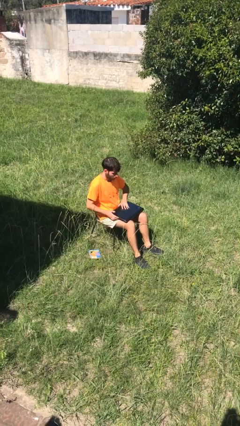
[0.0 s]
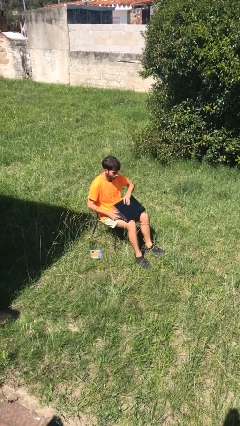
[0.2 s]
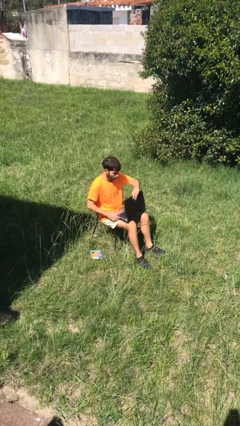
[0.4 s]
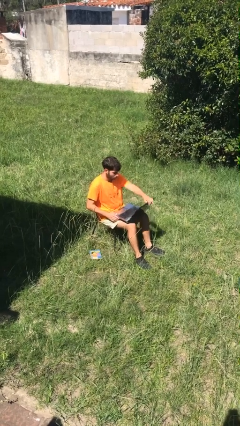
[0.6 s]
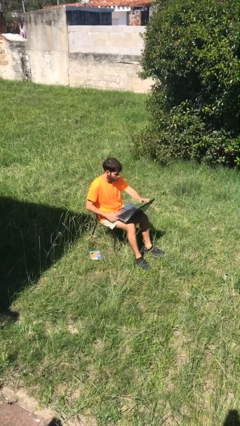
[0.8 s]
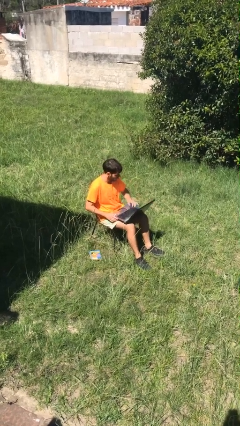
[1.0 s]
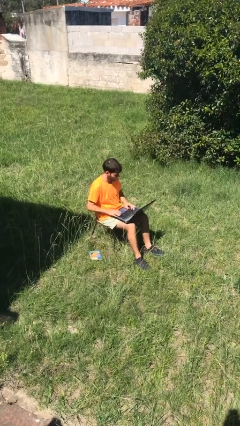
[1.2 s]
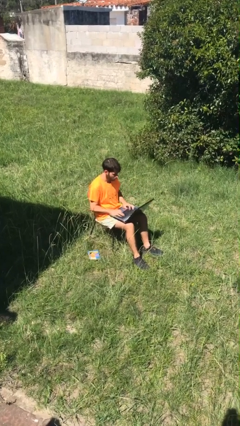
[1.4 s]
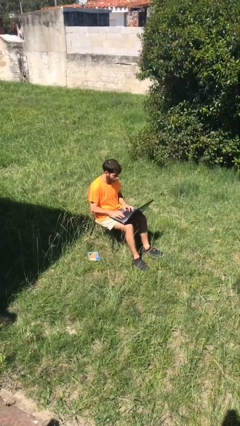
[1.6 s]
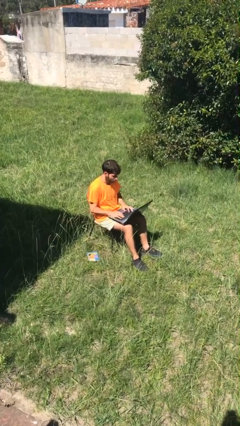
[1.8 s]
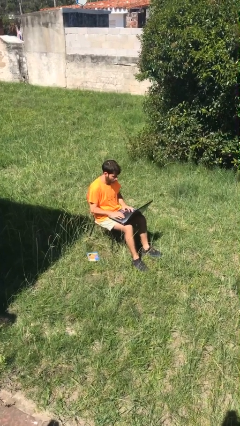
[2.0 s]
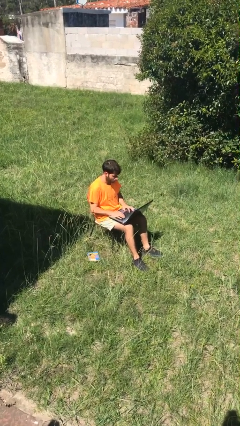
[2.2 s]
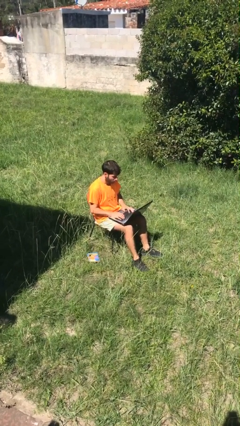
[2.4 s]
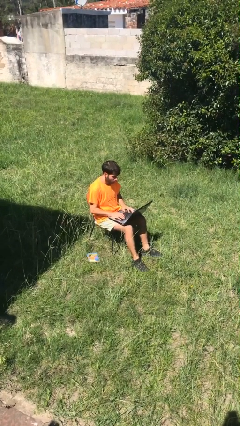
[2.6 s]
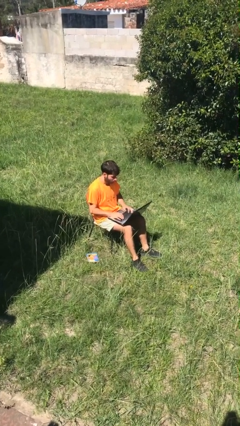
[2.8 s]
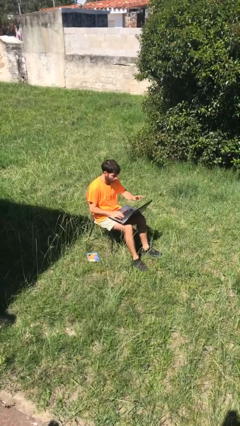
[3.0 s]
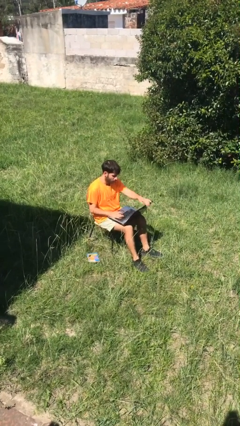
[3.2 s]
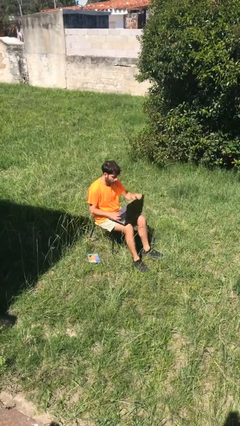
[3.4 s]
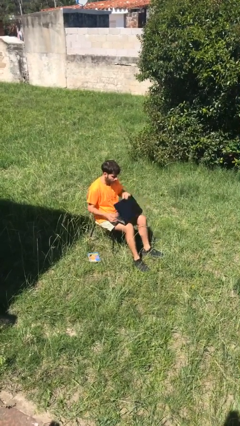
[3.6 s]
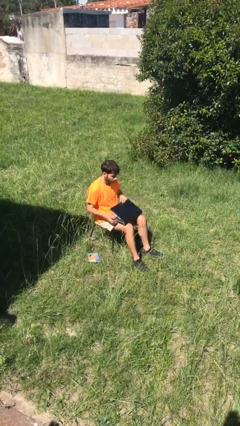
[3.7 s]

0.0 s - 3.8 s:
person interacts with laptop

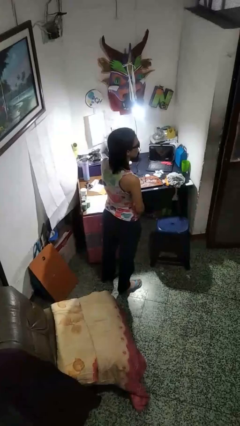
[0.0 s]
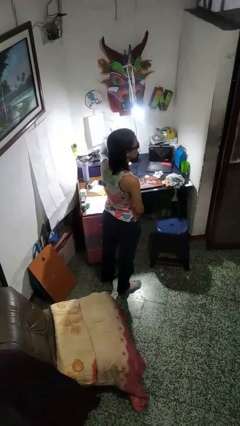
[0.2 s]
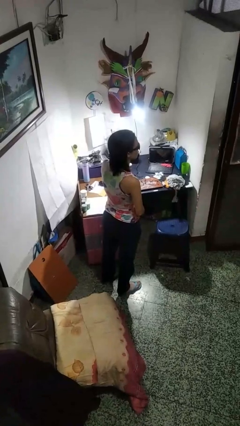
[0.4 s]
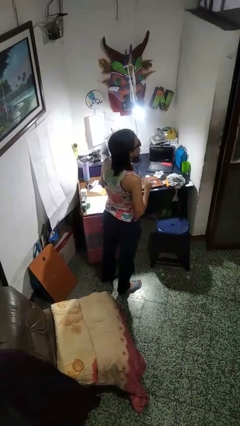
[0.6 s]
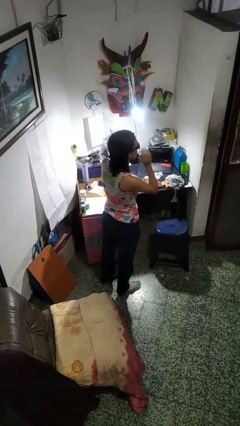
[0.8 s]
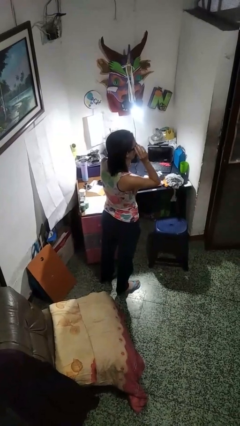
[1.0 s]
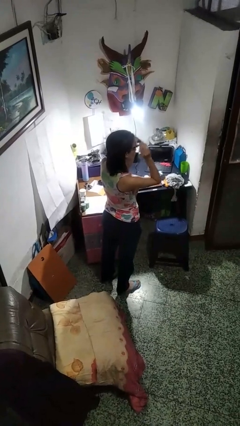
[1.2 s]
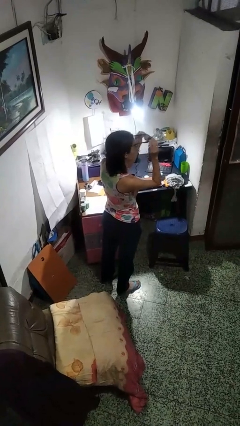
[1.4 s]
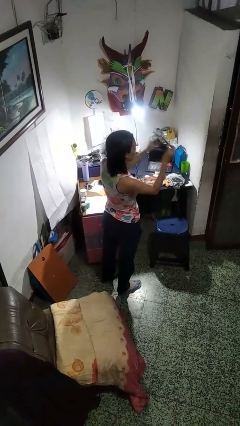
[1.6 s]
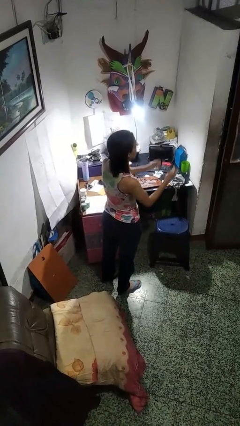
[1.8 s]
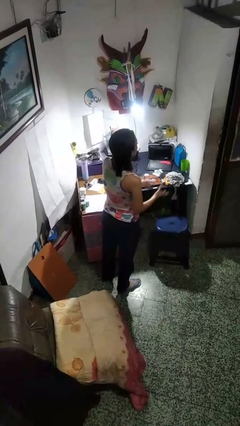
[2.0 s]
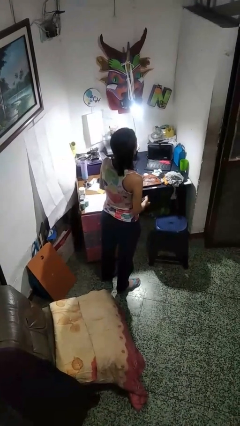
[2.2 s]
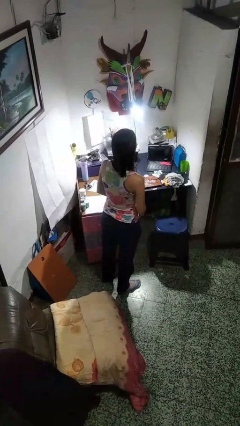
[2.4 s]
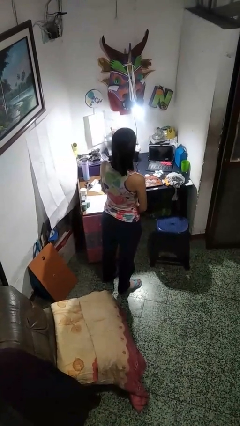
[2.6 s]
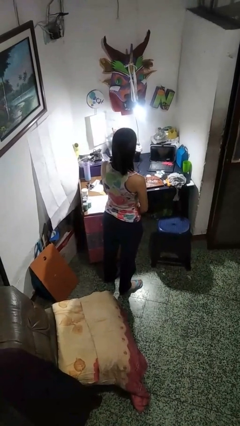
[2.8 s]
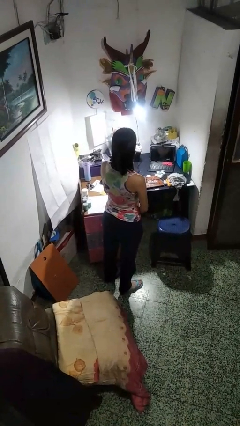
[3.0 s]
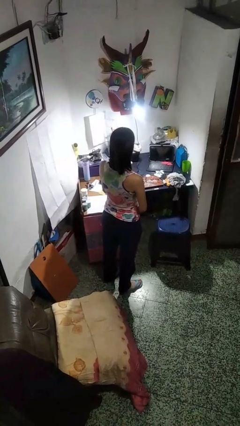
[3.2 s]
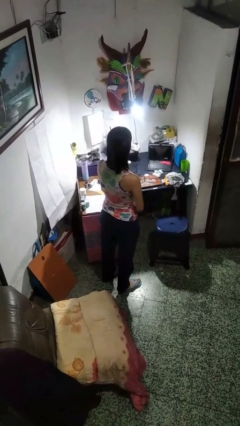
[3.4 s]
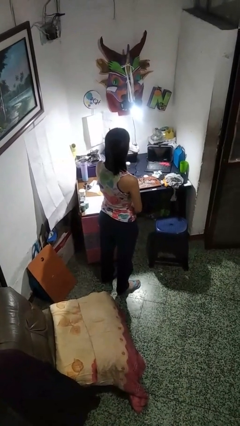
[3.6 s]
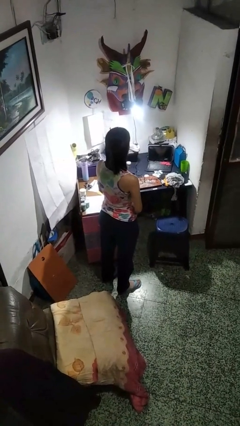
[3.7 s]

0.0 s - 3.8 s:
person takes off sunglasses

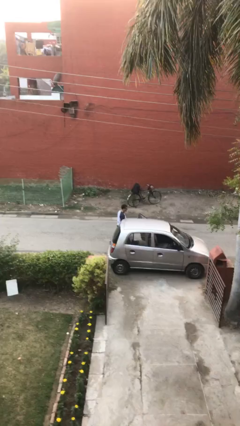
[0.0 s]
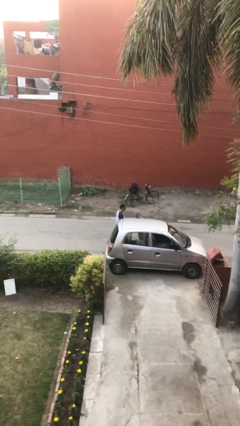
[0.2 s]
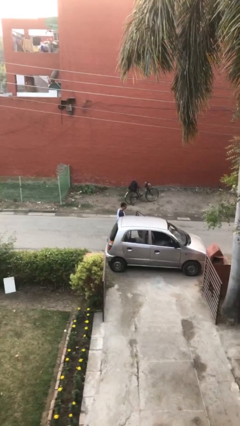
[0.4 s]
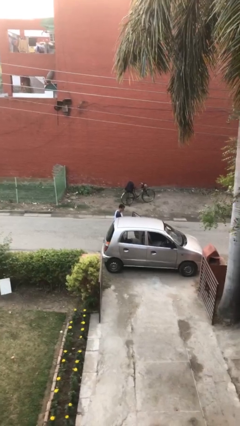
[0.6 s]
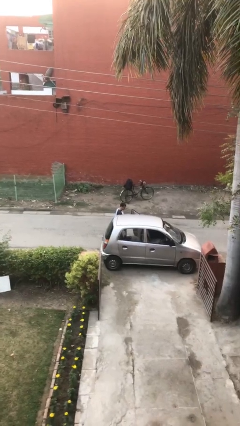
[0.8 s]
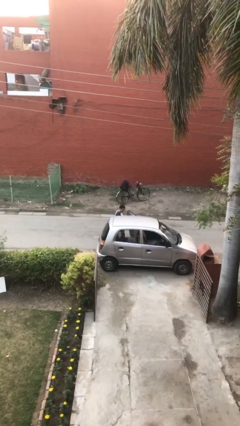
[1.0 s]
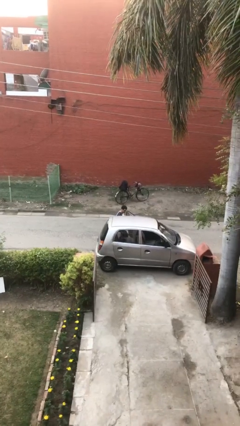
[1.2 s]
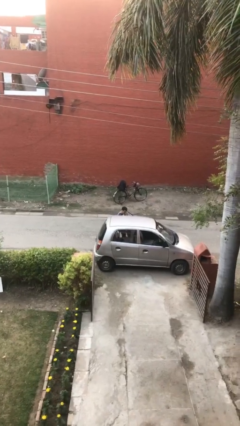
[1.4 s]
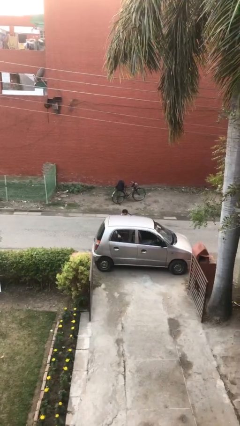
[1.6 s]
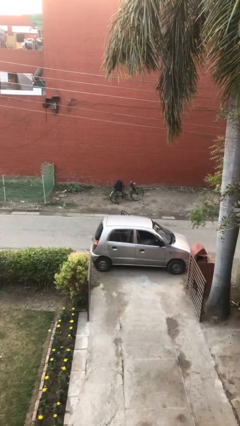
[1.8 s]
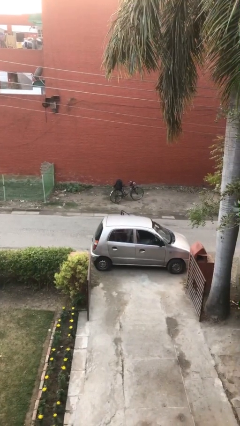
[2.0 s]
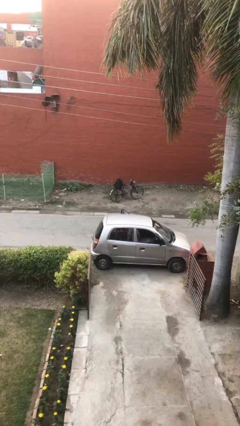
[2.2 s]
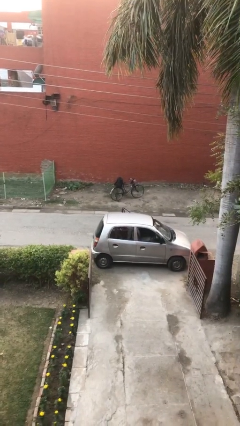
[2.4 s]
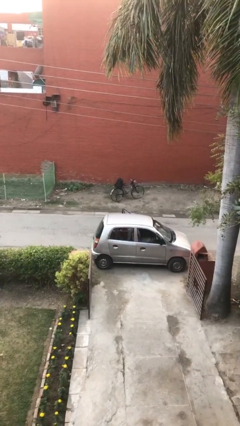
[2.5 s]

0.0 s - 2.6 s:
person enters car

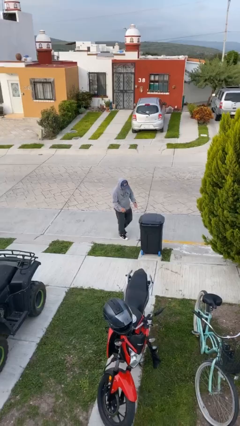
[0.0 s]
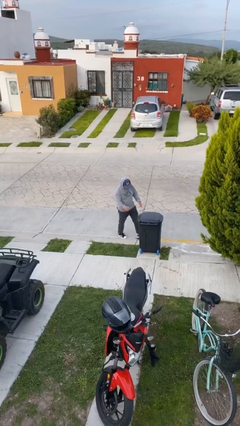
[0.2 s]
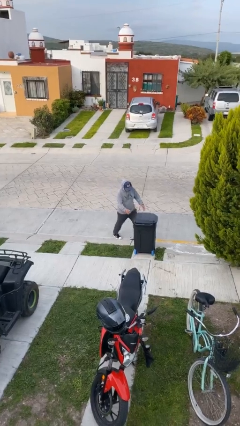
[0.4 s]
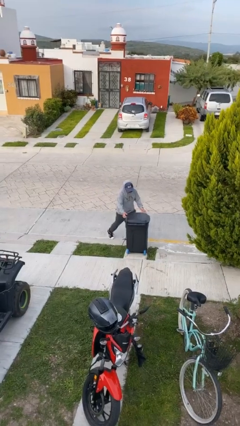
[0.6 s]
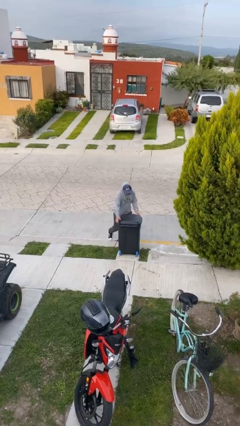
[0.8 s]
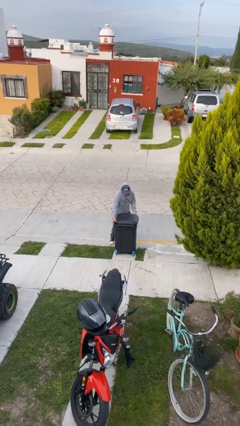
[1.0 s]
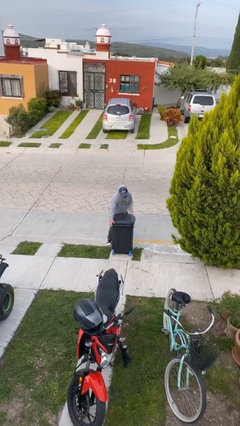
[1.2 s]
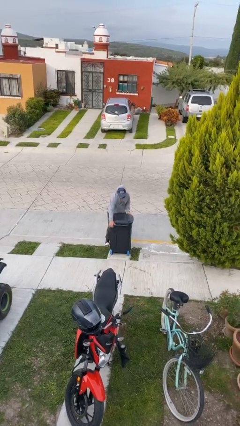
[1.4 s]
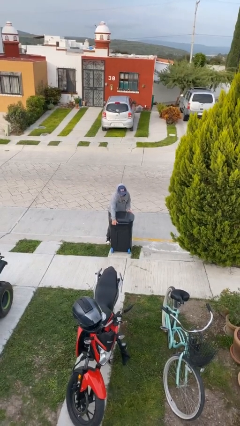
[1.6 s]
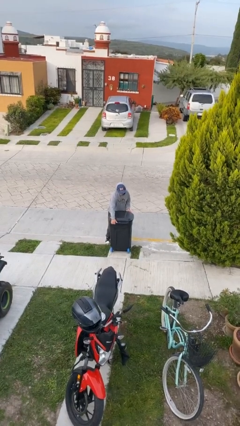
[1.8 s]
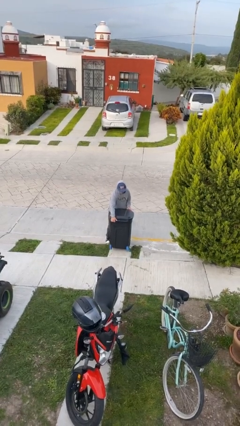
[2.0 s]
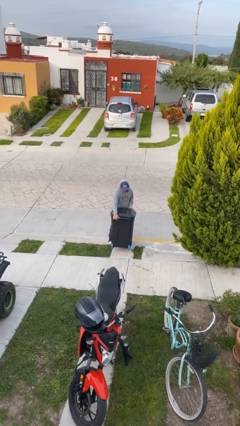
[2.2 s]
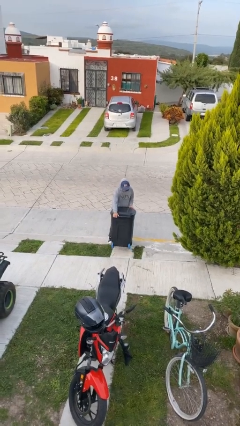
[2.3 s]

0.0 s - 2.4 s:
person picks up object from floor

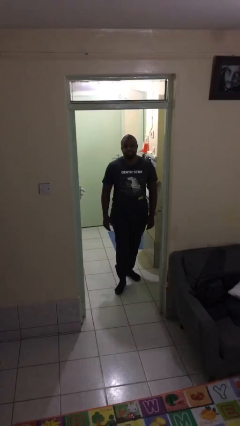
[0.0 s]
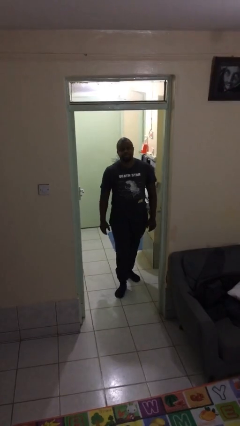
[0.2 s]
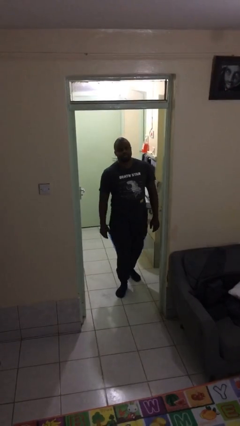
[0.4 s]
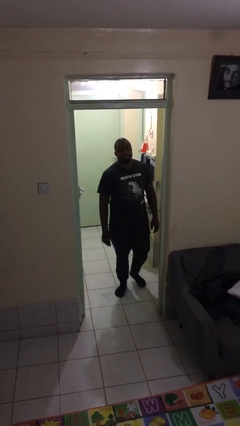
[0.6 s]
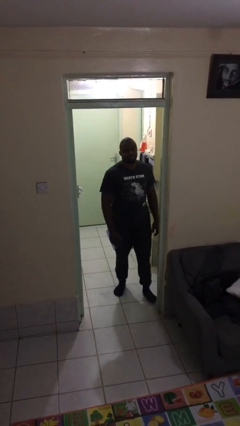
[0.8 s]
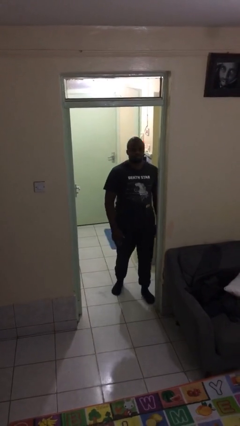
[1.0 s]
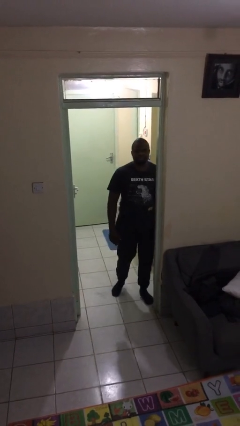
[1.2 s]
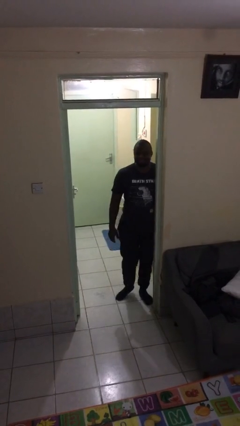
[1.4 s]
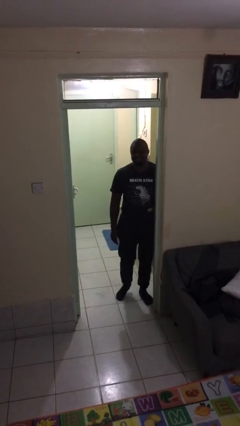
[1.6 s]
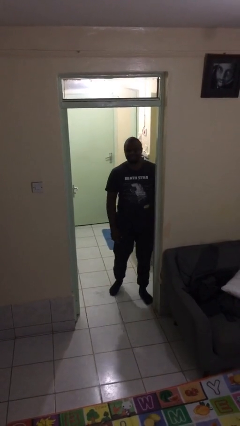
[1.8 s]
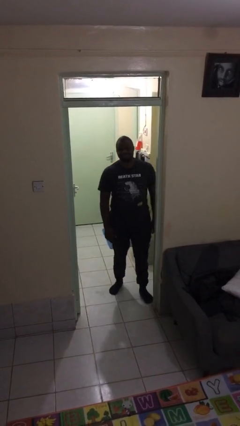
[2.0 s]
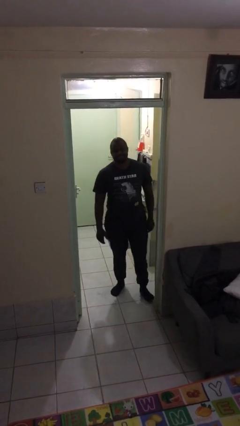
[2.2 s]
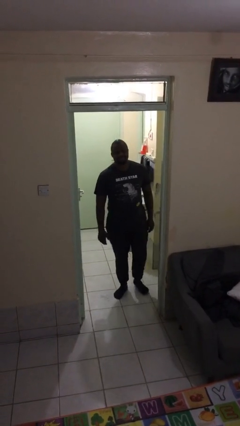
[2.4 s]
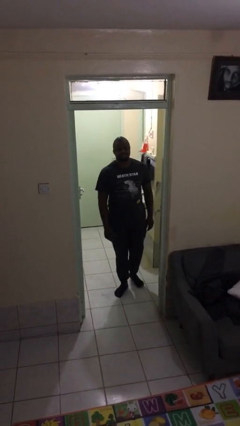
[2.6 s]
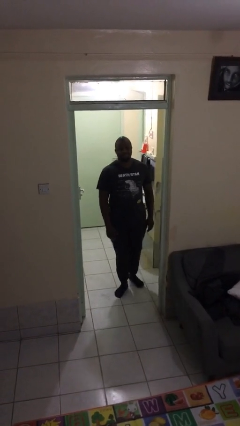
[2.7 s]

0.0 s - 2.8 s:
person bumps into wall

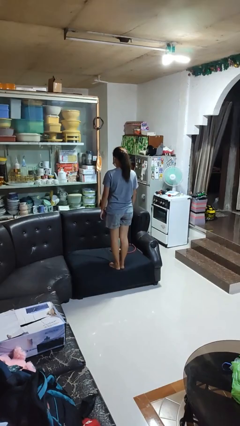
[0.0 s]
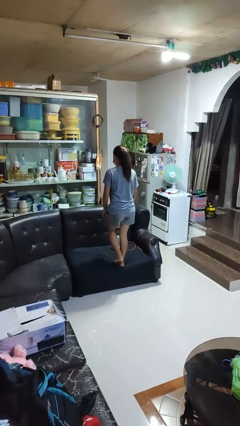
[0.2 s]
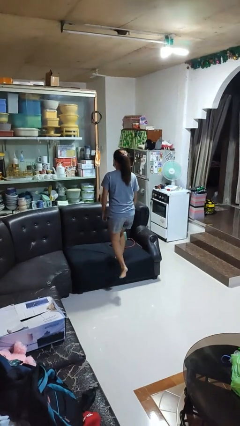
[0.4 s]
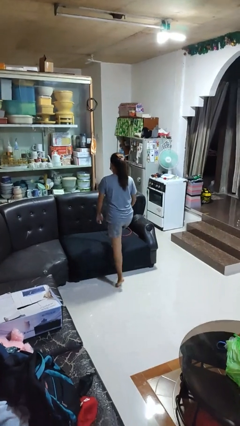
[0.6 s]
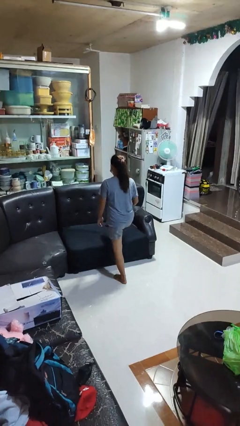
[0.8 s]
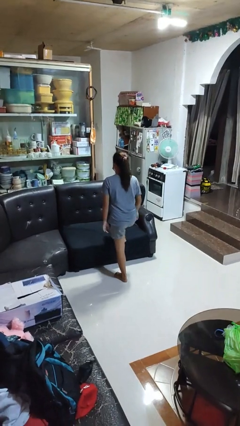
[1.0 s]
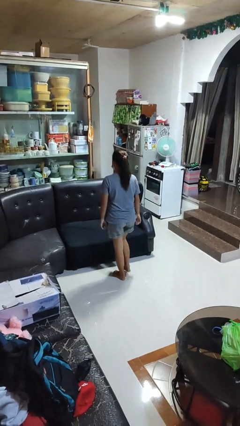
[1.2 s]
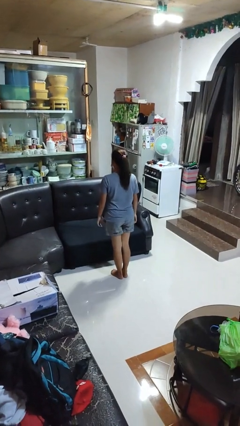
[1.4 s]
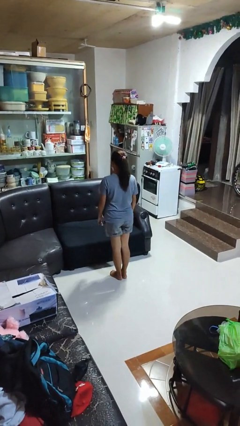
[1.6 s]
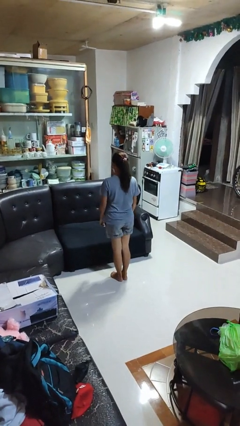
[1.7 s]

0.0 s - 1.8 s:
person climbs off couch

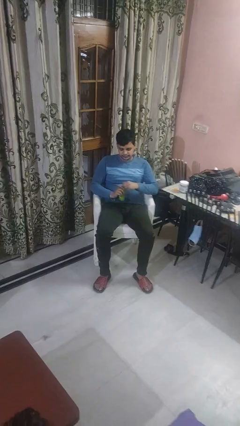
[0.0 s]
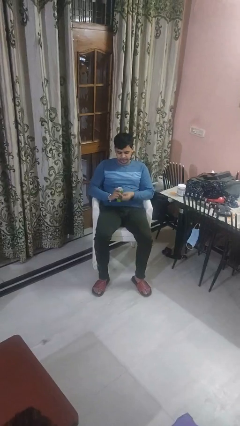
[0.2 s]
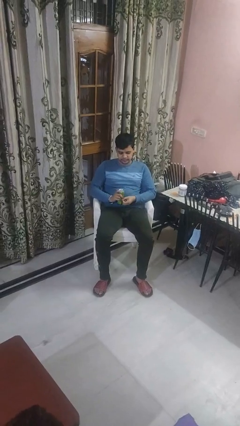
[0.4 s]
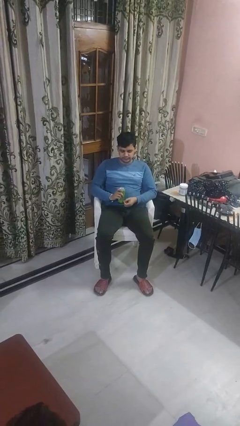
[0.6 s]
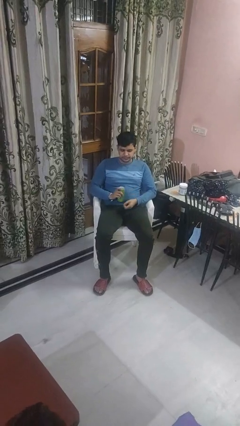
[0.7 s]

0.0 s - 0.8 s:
person opens beverage can
